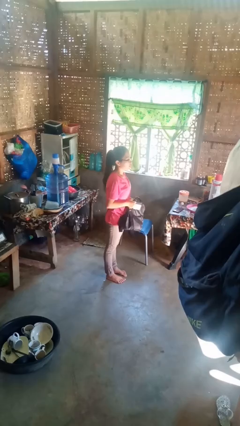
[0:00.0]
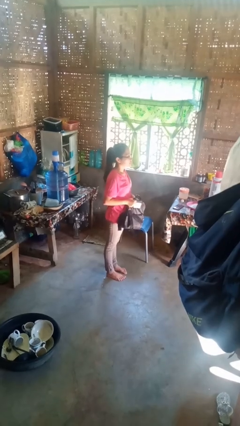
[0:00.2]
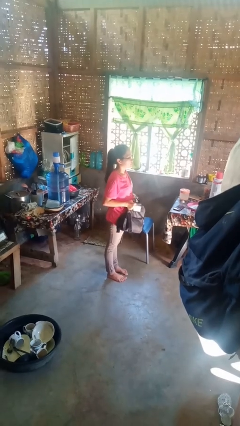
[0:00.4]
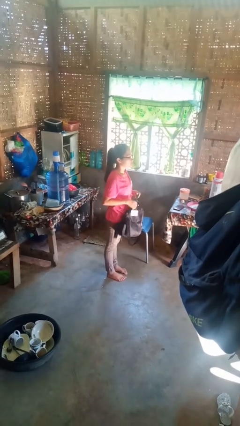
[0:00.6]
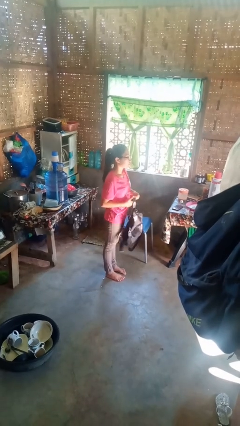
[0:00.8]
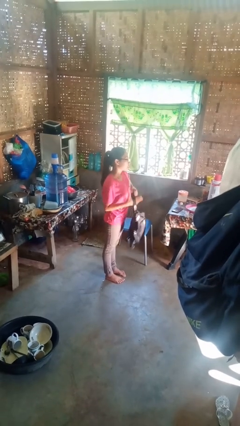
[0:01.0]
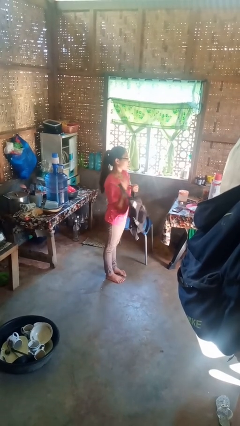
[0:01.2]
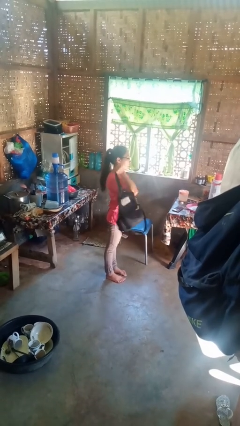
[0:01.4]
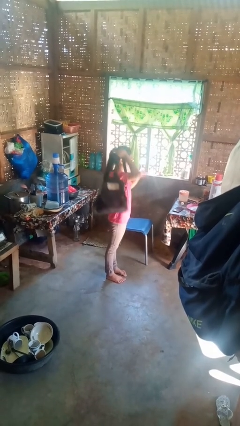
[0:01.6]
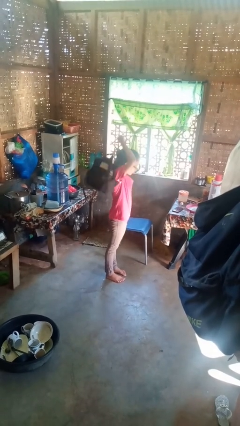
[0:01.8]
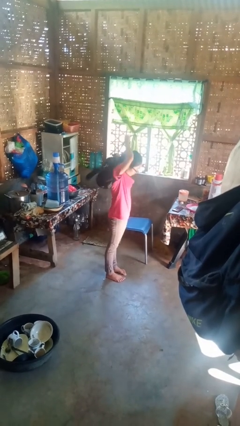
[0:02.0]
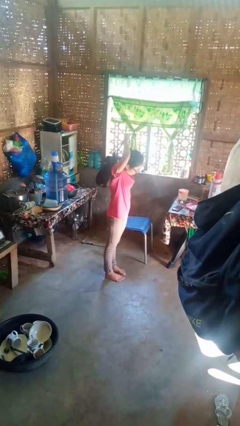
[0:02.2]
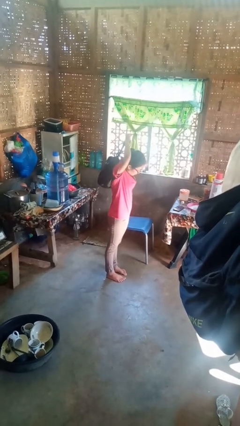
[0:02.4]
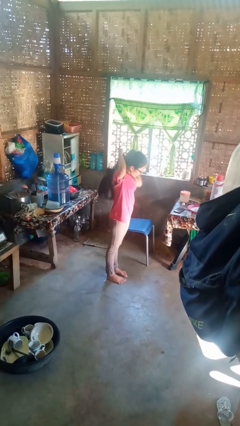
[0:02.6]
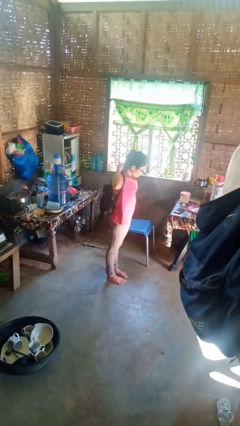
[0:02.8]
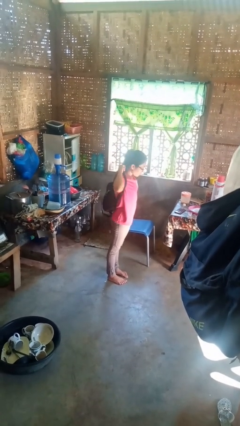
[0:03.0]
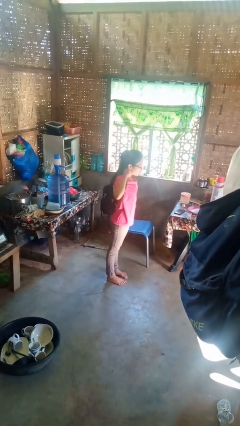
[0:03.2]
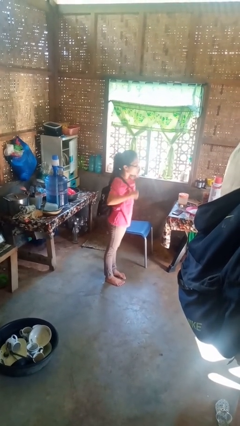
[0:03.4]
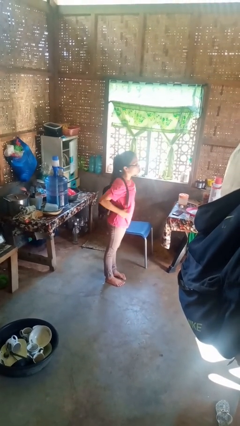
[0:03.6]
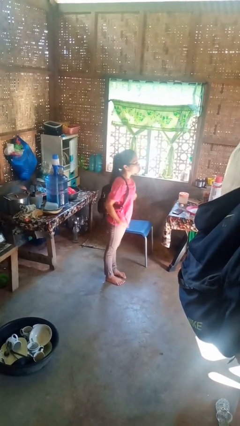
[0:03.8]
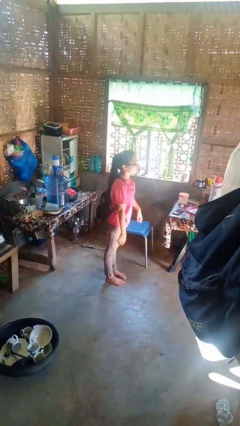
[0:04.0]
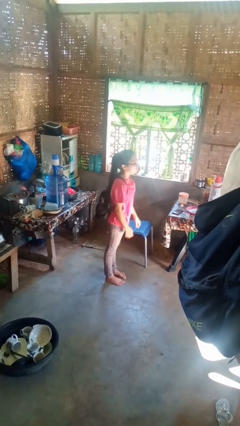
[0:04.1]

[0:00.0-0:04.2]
person puts on backpack

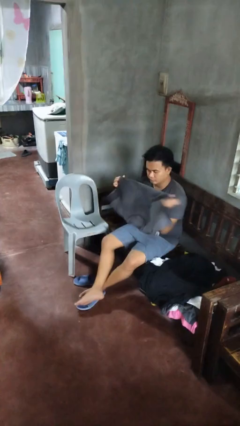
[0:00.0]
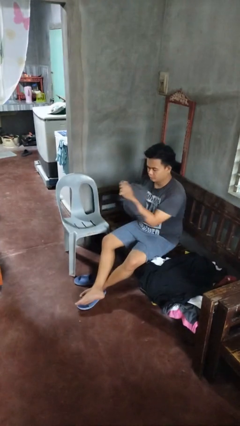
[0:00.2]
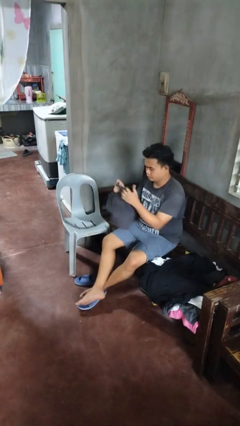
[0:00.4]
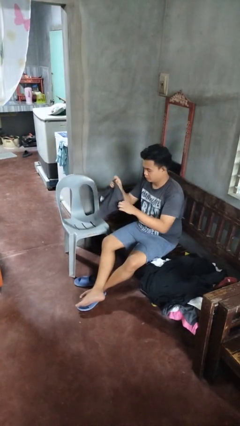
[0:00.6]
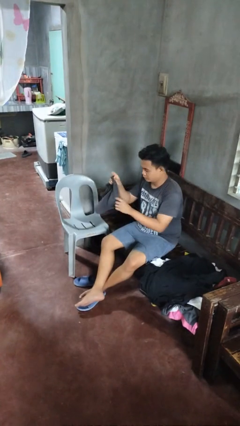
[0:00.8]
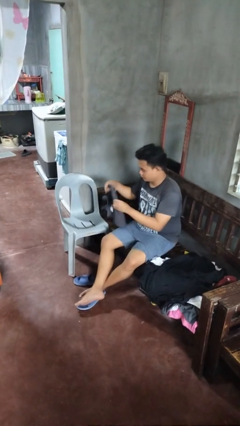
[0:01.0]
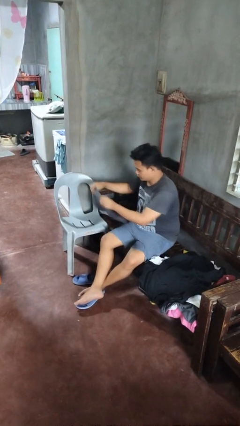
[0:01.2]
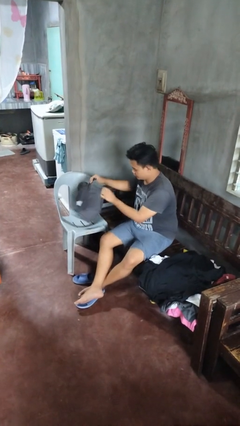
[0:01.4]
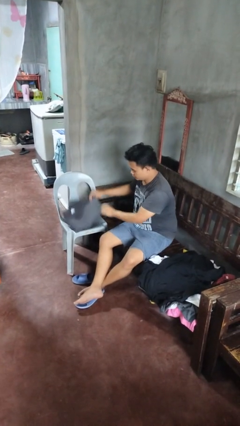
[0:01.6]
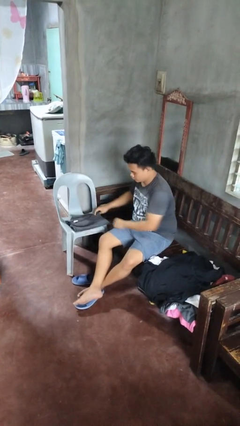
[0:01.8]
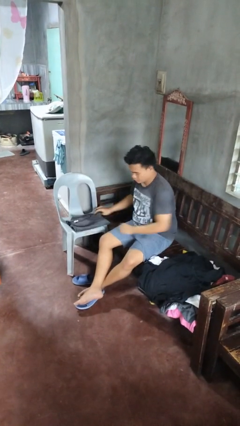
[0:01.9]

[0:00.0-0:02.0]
person folds shirt

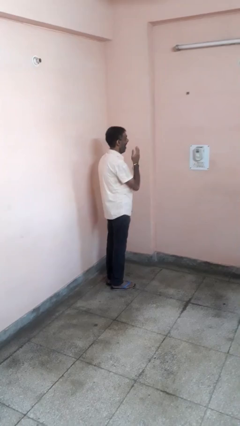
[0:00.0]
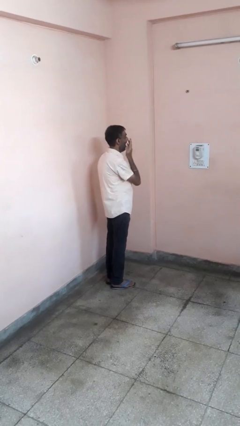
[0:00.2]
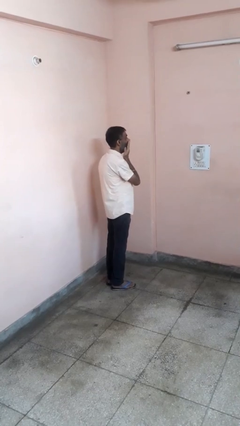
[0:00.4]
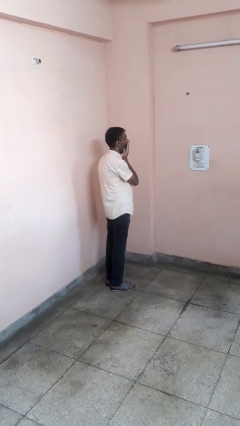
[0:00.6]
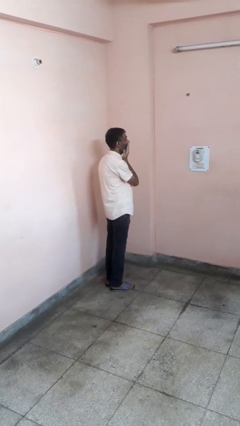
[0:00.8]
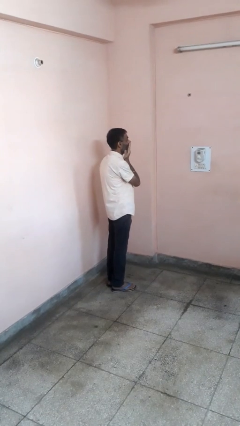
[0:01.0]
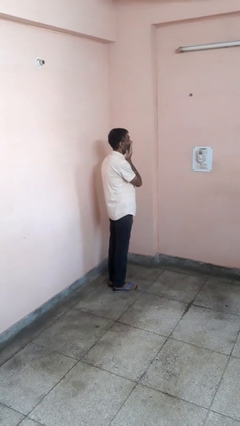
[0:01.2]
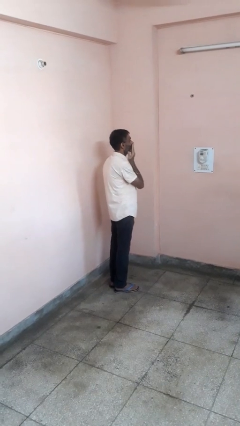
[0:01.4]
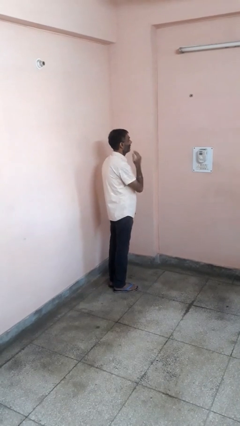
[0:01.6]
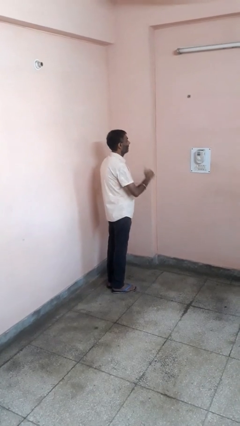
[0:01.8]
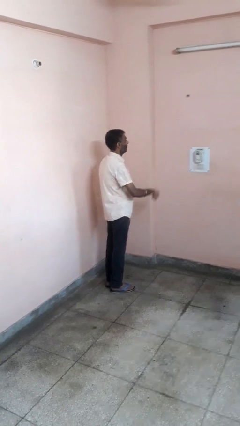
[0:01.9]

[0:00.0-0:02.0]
person yawns

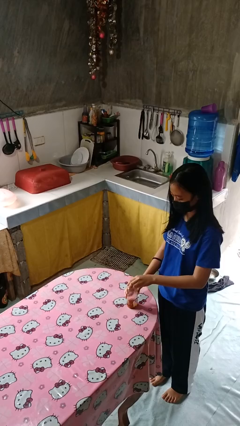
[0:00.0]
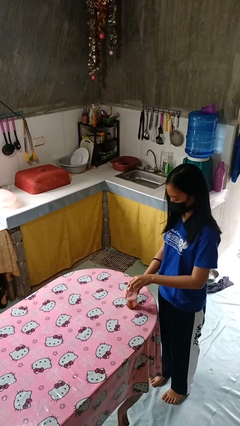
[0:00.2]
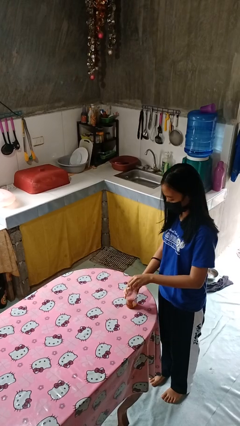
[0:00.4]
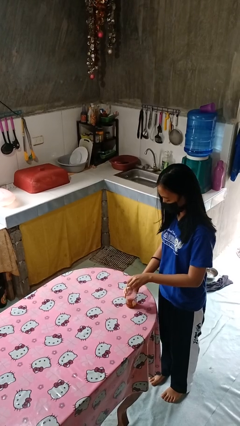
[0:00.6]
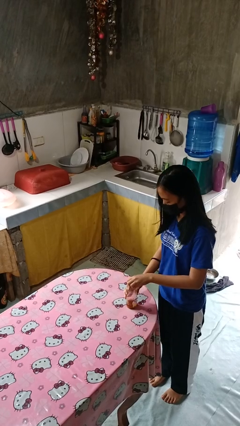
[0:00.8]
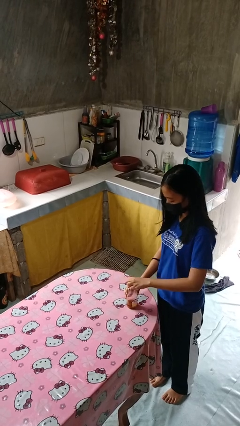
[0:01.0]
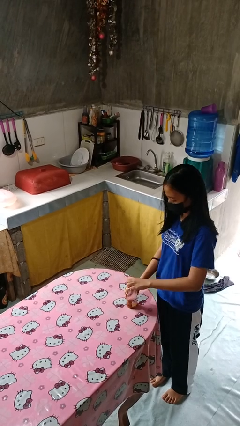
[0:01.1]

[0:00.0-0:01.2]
person closes jar

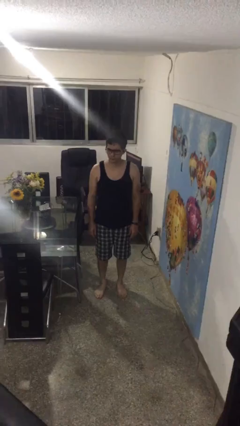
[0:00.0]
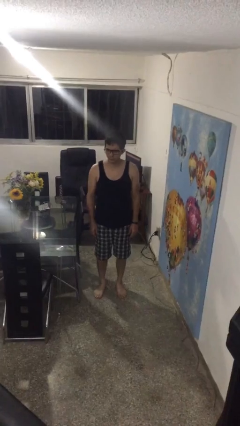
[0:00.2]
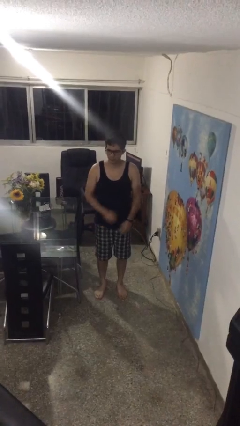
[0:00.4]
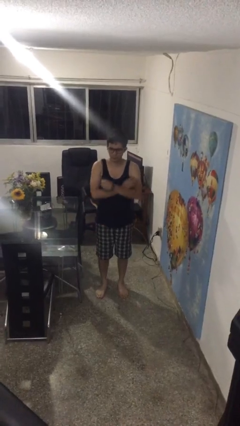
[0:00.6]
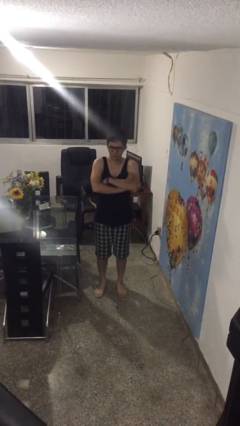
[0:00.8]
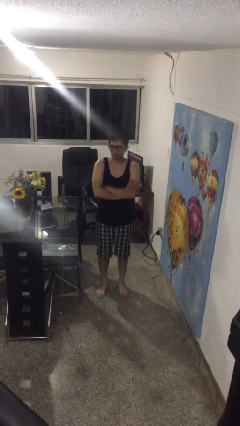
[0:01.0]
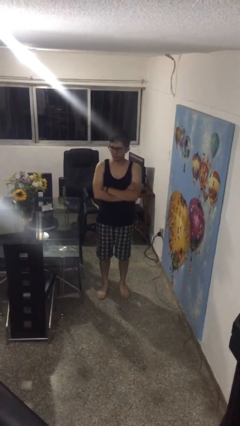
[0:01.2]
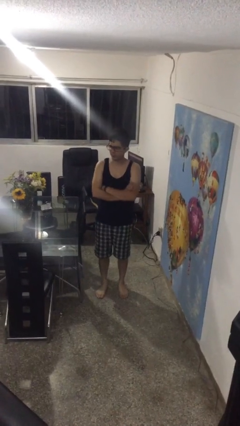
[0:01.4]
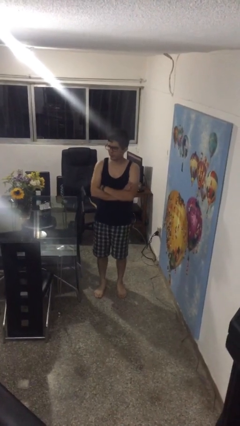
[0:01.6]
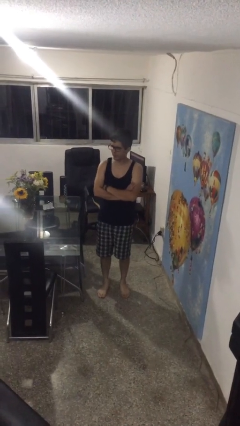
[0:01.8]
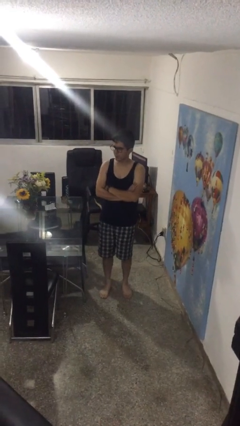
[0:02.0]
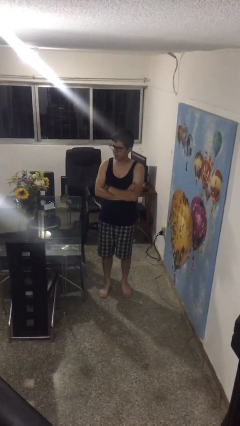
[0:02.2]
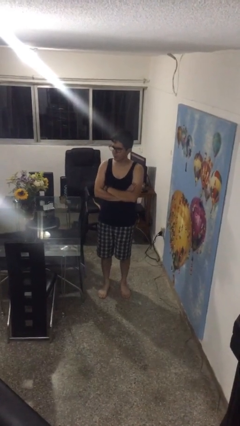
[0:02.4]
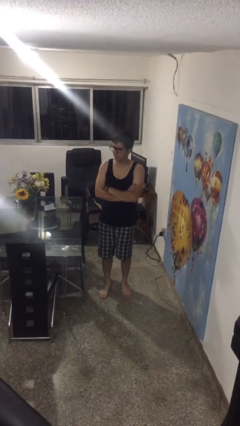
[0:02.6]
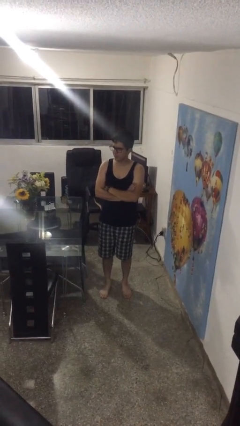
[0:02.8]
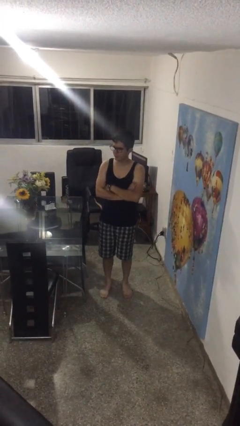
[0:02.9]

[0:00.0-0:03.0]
person crosses arms

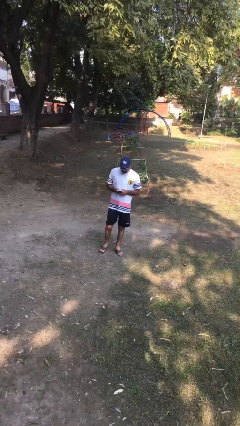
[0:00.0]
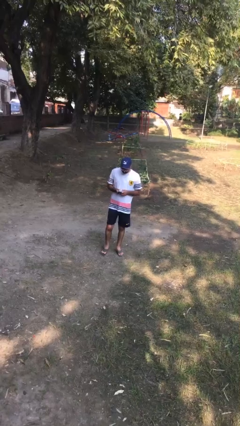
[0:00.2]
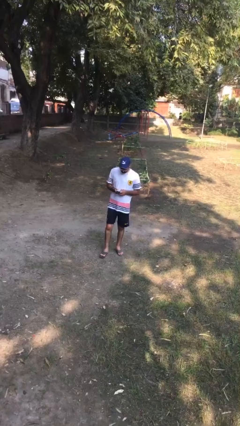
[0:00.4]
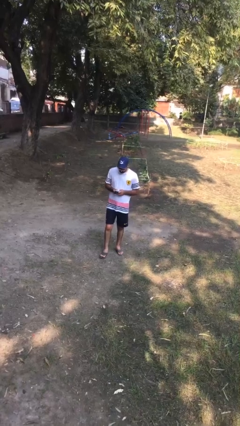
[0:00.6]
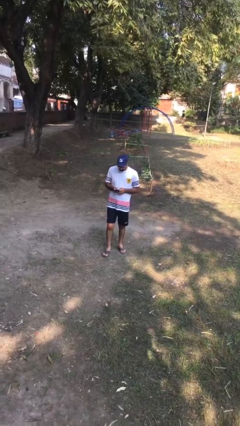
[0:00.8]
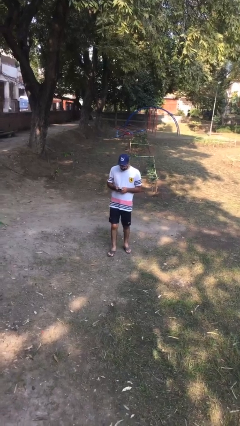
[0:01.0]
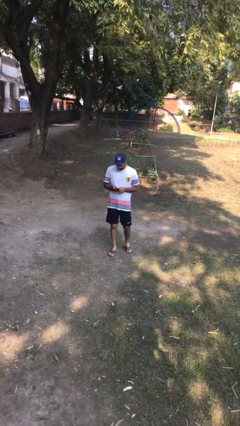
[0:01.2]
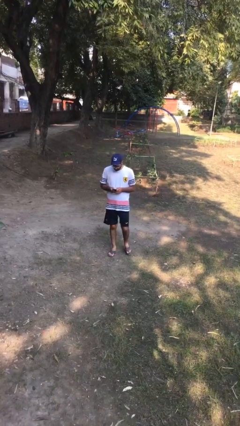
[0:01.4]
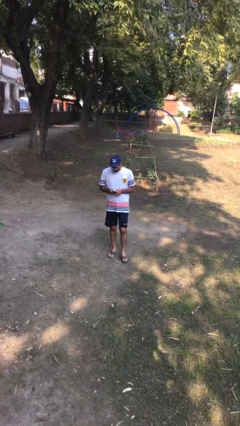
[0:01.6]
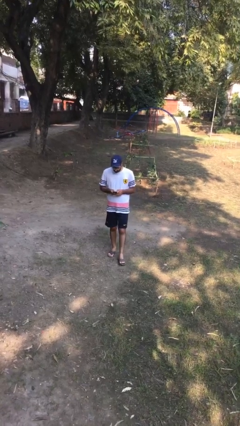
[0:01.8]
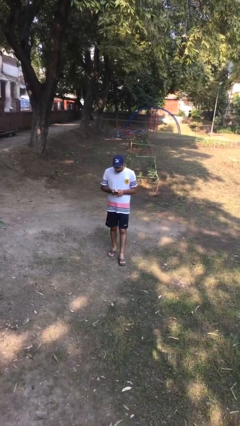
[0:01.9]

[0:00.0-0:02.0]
person texts on phone

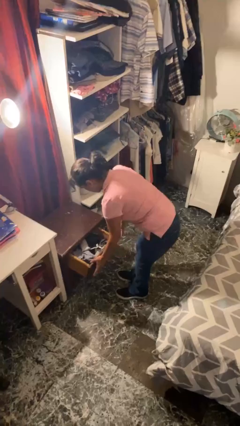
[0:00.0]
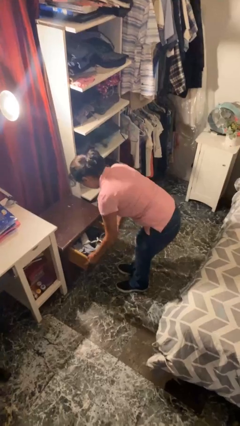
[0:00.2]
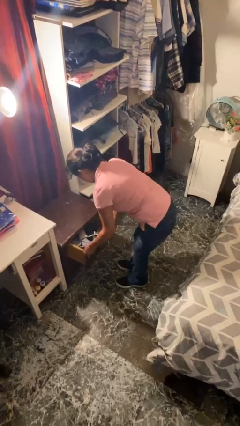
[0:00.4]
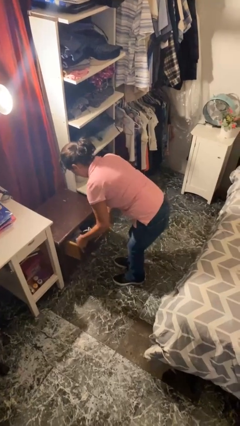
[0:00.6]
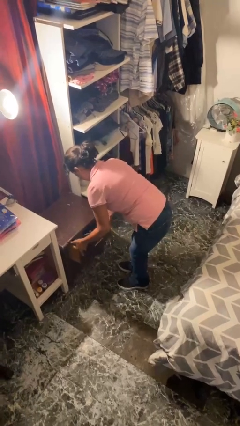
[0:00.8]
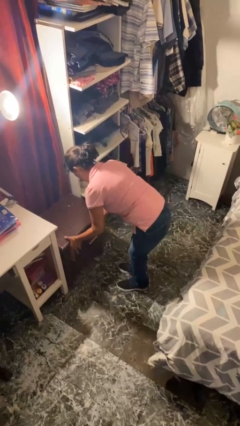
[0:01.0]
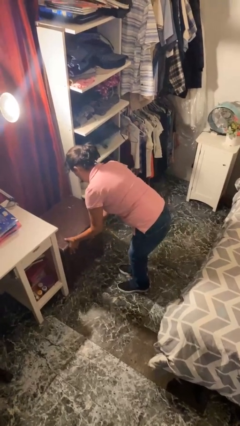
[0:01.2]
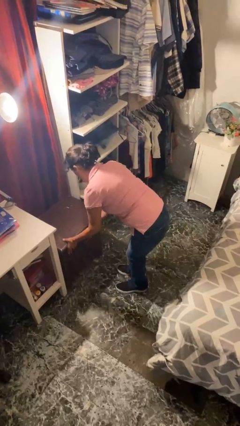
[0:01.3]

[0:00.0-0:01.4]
person closes dresser drawer

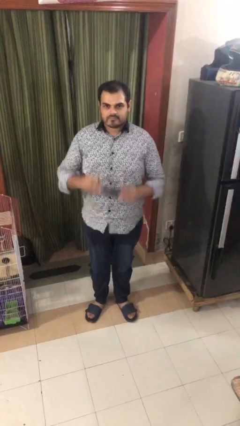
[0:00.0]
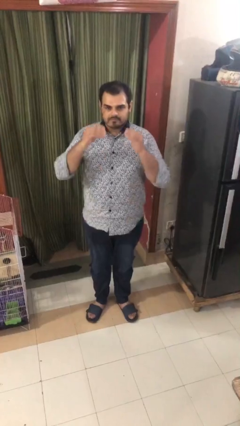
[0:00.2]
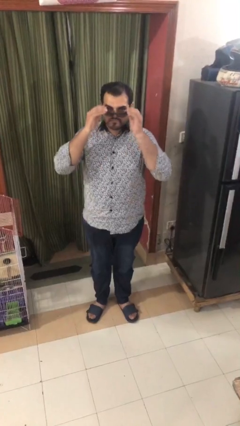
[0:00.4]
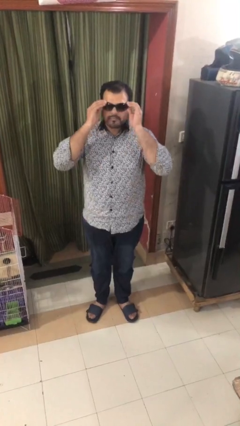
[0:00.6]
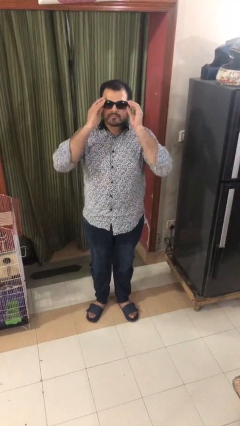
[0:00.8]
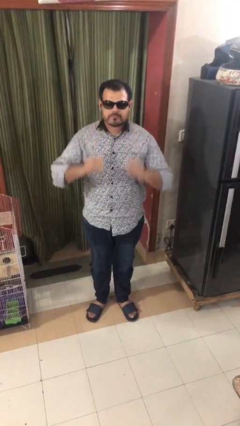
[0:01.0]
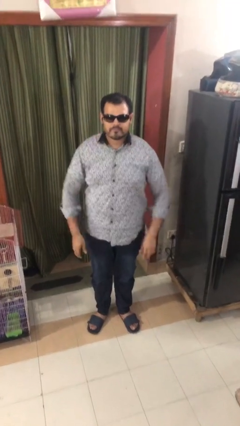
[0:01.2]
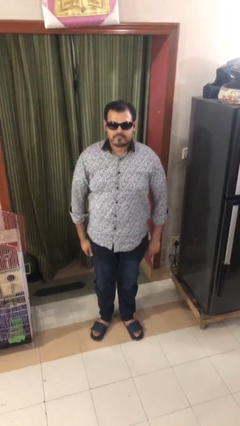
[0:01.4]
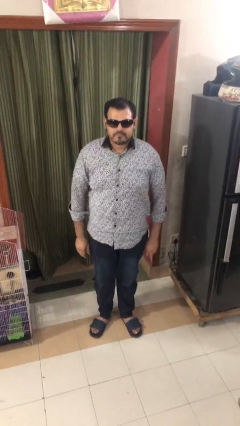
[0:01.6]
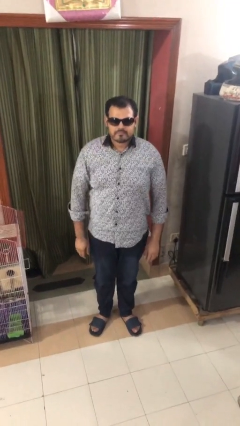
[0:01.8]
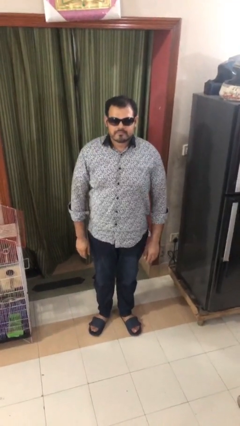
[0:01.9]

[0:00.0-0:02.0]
person puts on sunglasses
